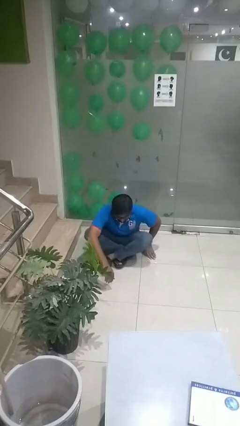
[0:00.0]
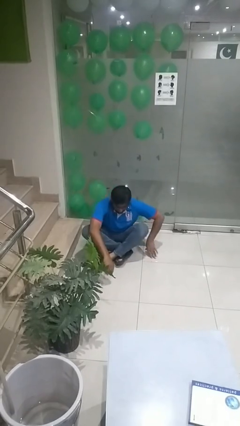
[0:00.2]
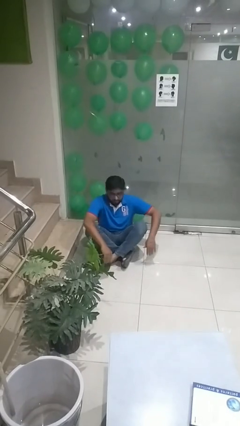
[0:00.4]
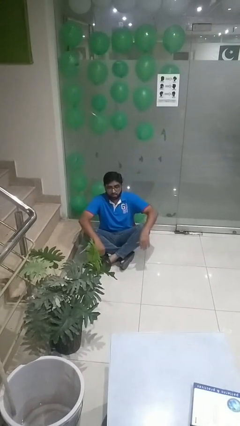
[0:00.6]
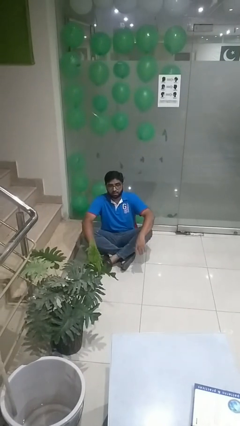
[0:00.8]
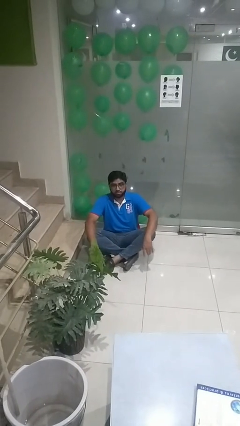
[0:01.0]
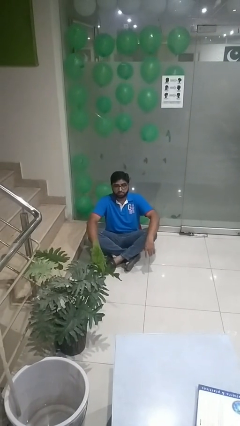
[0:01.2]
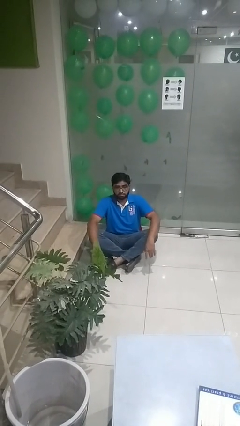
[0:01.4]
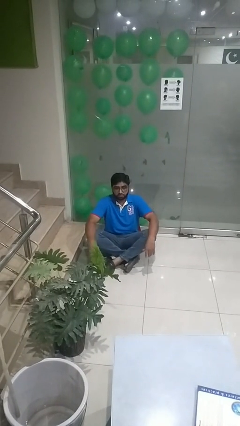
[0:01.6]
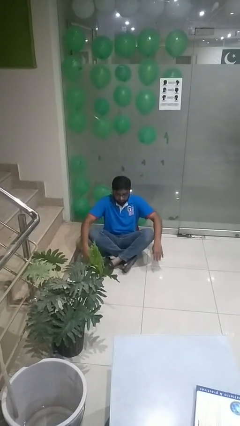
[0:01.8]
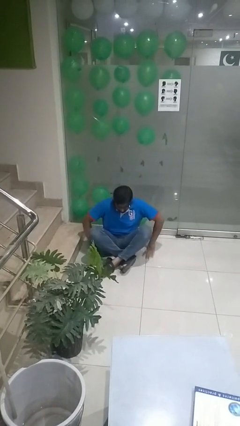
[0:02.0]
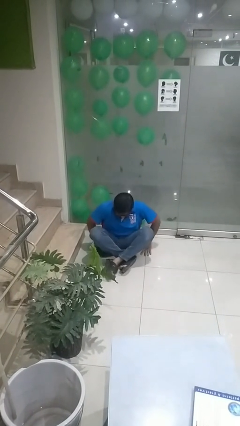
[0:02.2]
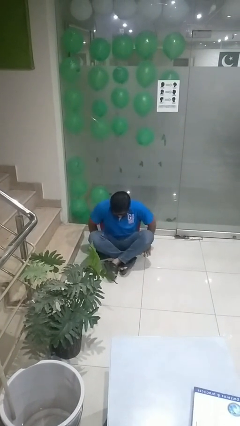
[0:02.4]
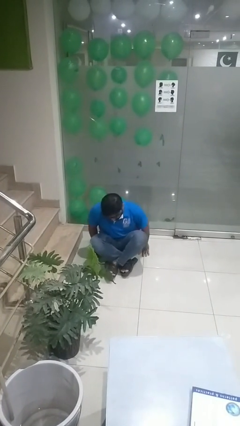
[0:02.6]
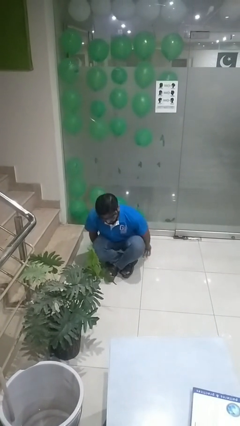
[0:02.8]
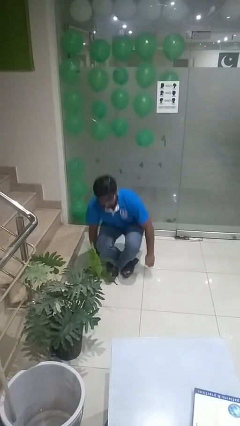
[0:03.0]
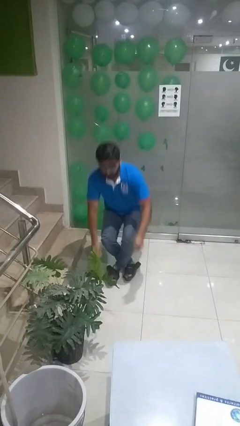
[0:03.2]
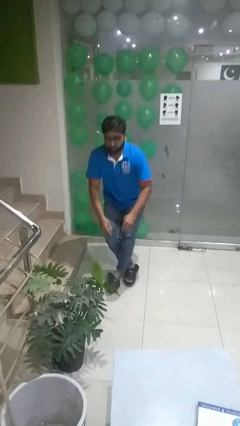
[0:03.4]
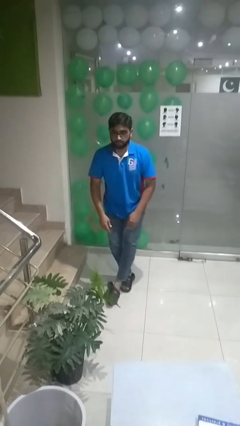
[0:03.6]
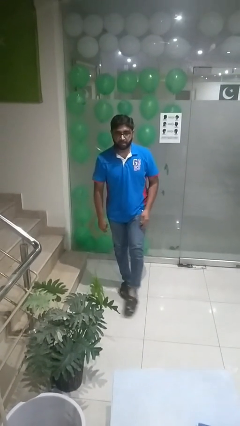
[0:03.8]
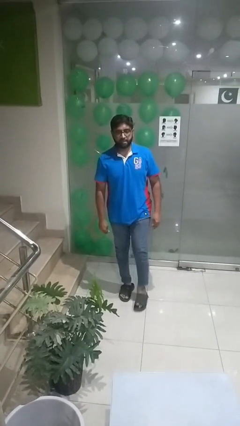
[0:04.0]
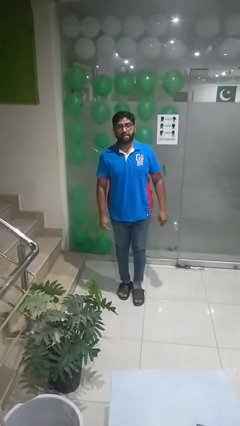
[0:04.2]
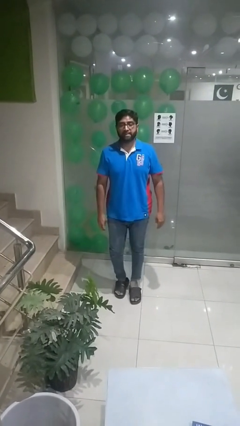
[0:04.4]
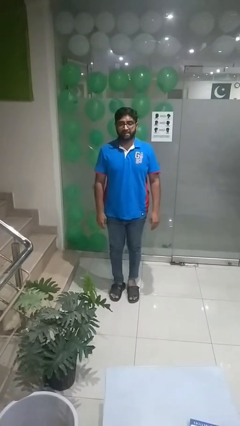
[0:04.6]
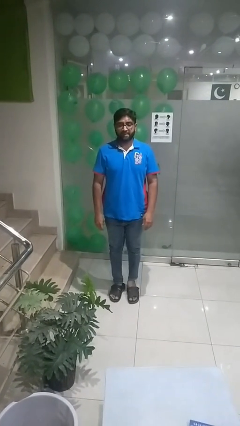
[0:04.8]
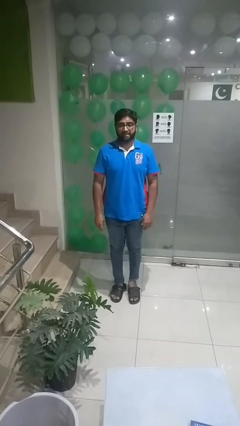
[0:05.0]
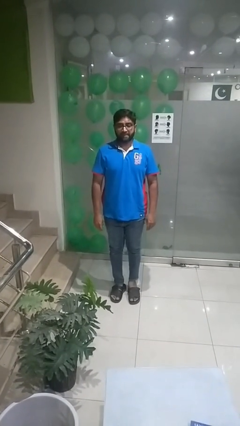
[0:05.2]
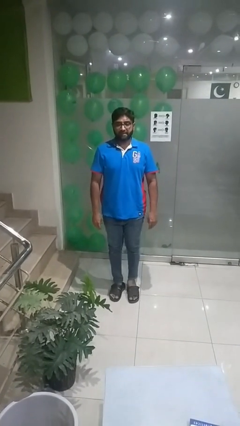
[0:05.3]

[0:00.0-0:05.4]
person stands up from floor

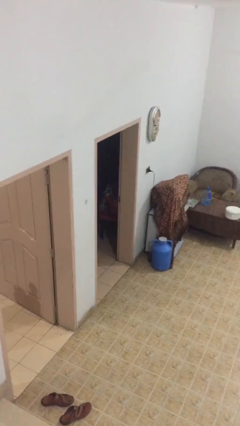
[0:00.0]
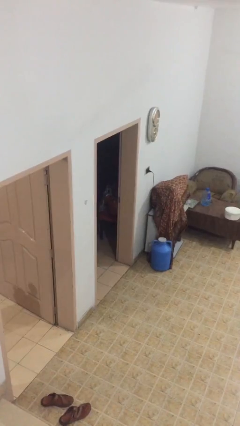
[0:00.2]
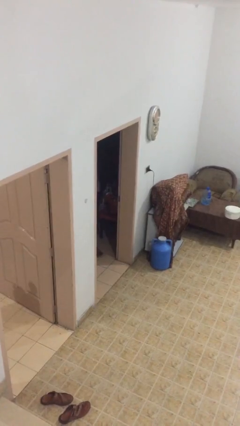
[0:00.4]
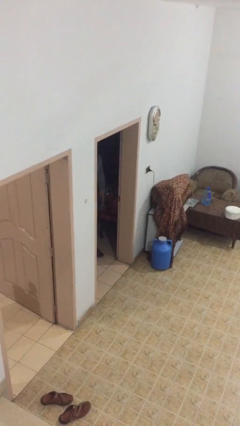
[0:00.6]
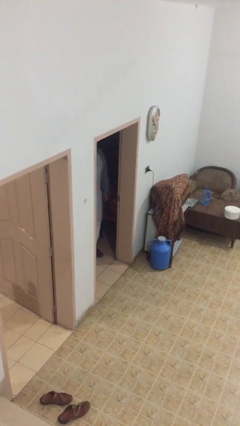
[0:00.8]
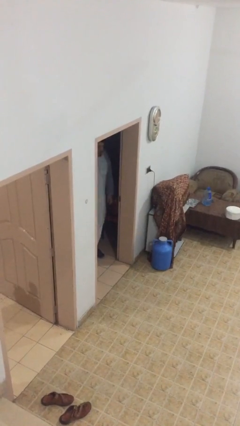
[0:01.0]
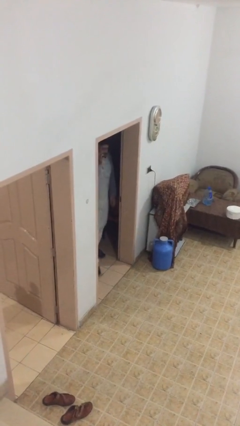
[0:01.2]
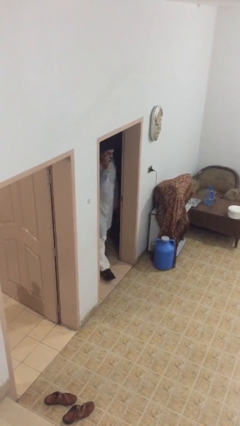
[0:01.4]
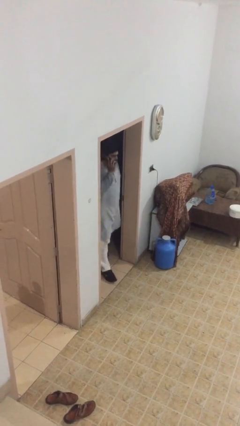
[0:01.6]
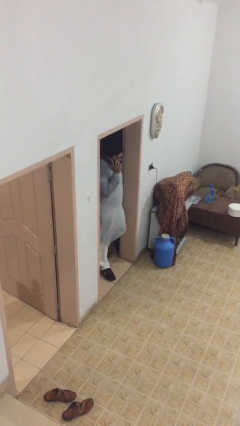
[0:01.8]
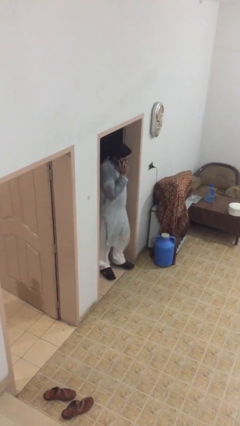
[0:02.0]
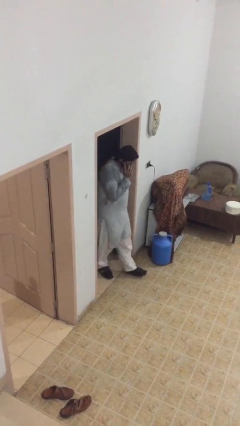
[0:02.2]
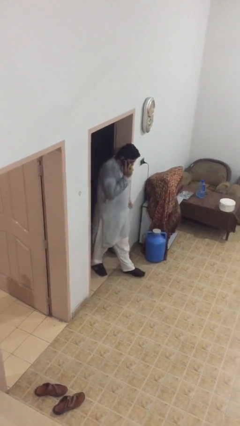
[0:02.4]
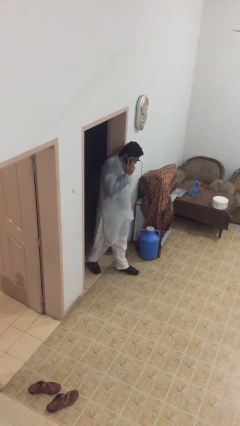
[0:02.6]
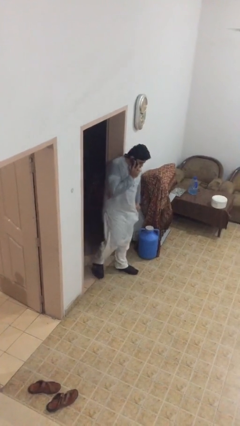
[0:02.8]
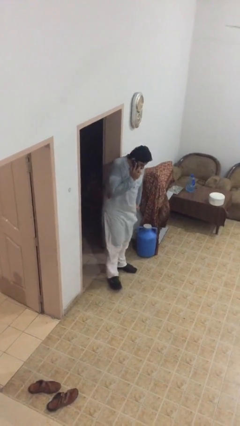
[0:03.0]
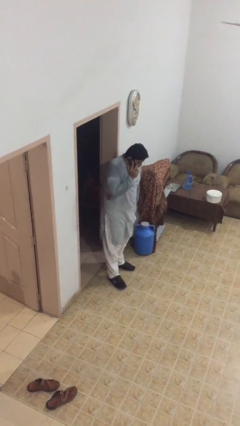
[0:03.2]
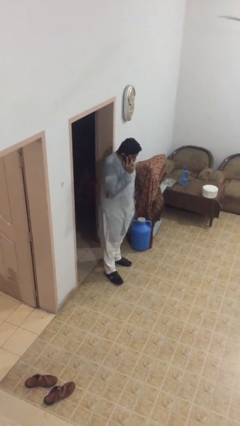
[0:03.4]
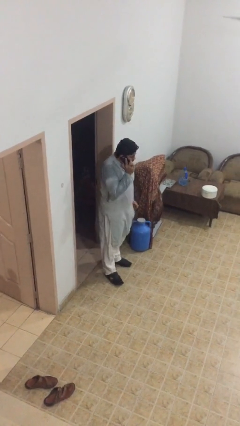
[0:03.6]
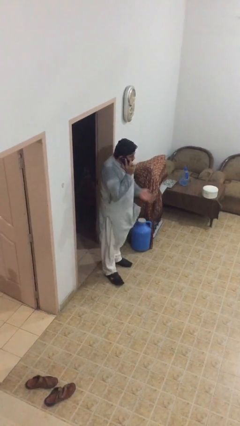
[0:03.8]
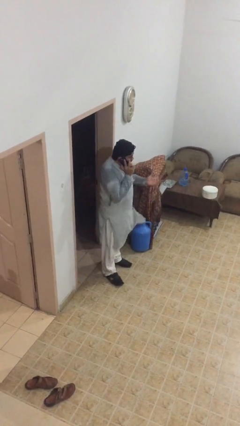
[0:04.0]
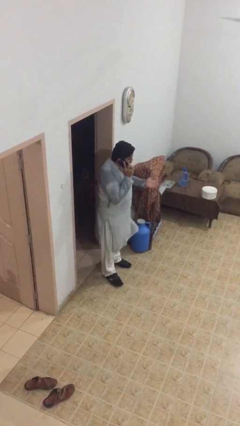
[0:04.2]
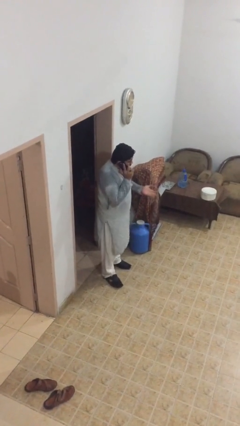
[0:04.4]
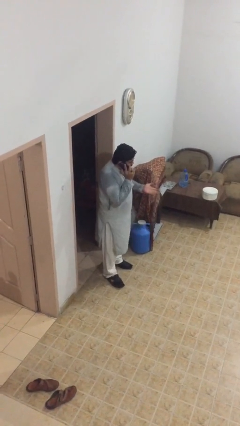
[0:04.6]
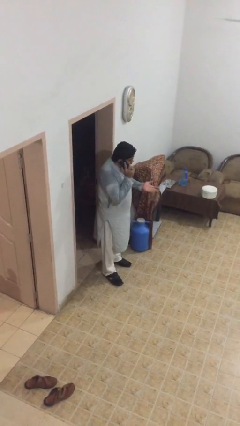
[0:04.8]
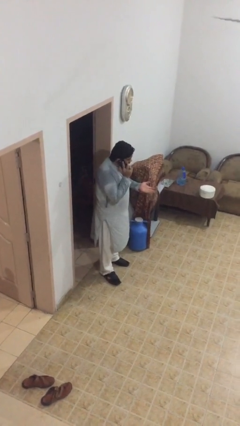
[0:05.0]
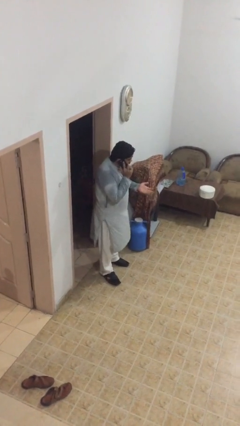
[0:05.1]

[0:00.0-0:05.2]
person enters scene through structure

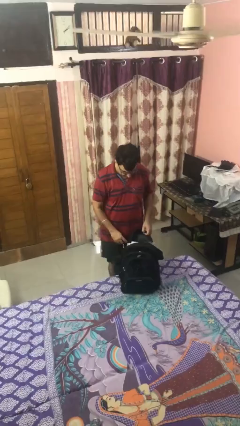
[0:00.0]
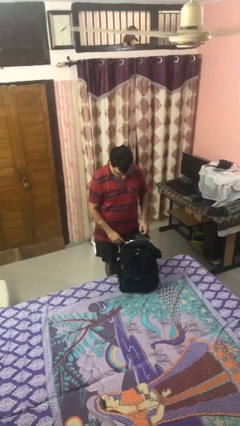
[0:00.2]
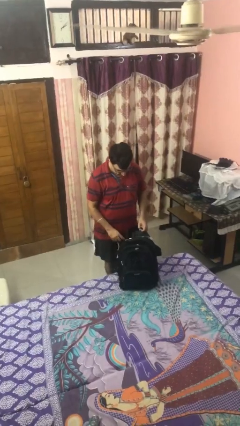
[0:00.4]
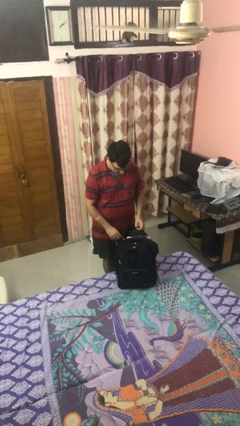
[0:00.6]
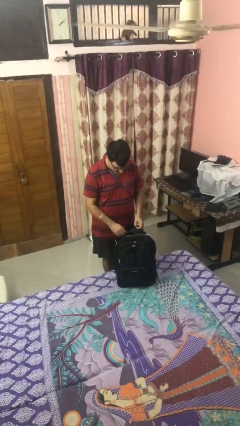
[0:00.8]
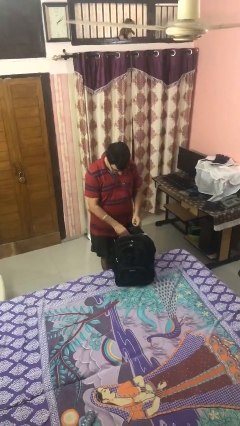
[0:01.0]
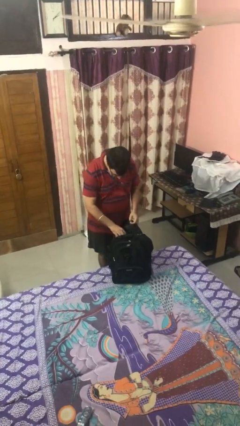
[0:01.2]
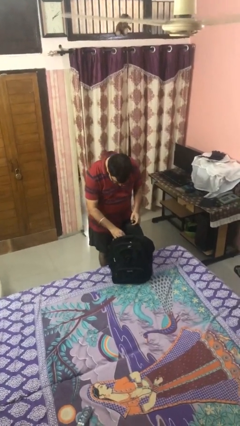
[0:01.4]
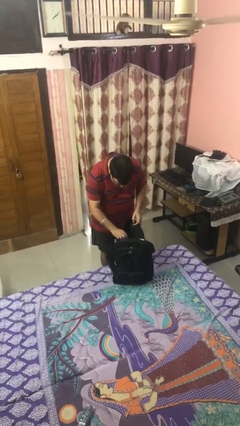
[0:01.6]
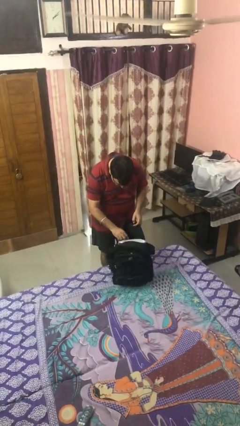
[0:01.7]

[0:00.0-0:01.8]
person searches in backpack

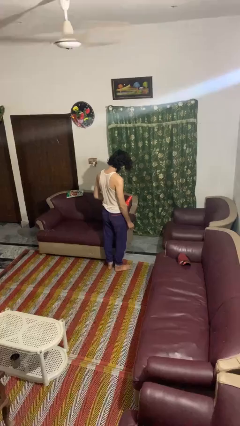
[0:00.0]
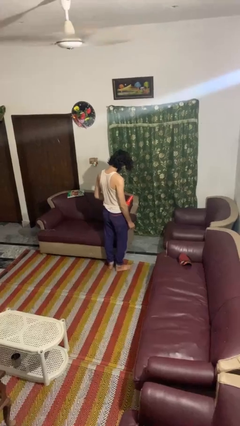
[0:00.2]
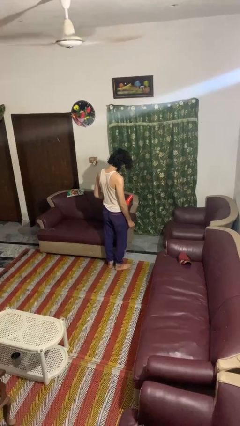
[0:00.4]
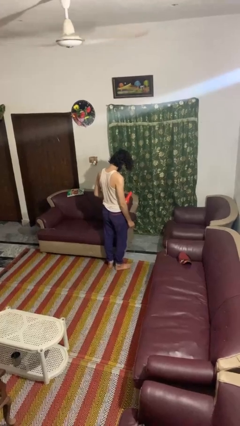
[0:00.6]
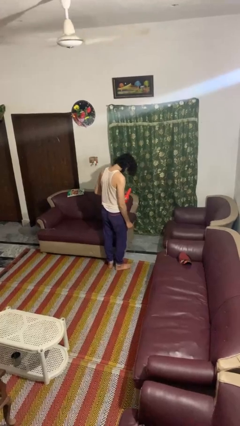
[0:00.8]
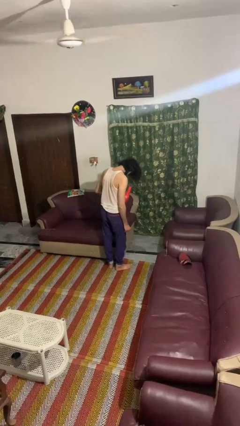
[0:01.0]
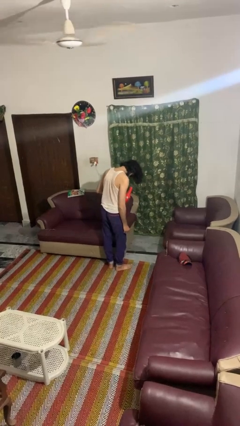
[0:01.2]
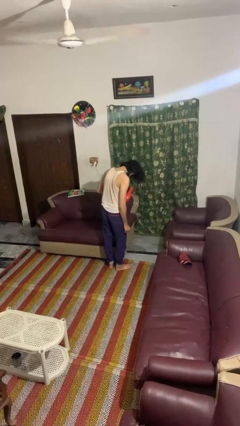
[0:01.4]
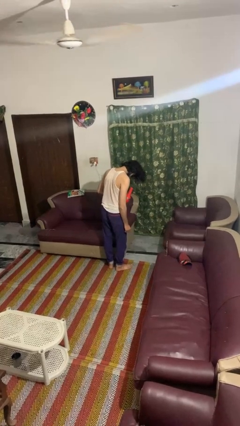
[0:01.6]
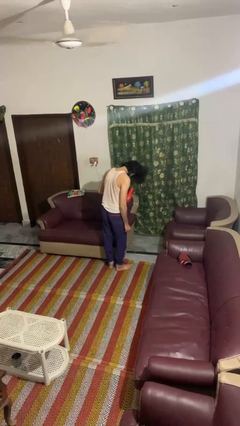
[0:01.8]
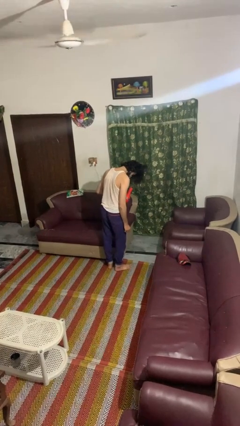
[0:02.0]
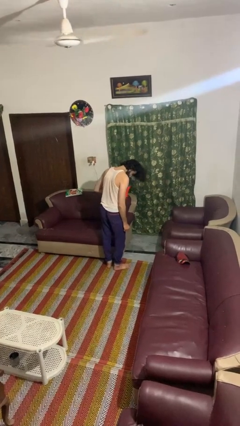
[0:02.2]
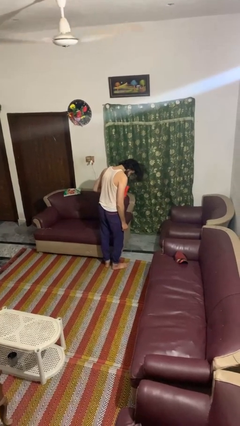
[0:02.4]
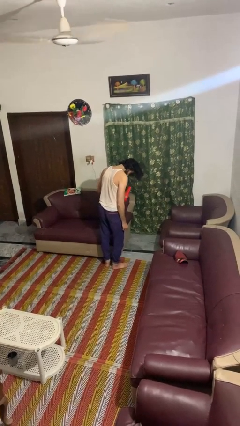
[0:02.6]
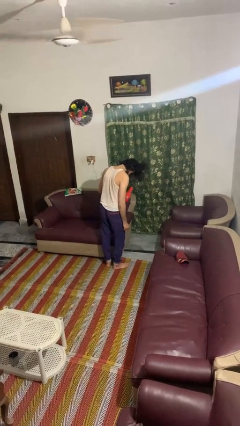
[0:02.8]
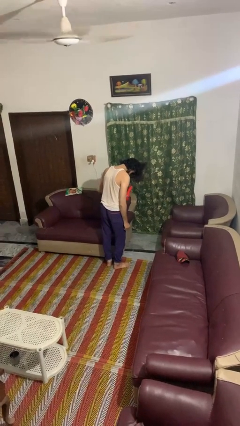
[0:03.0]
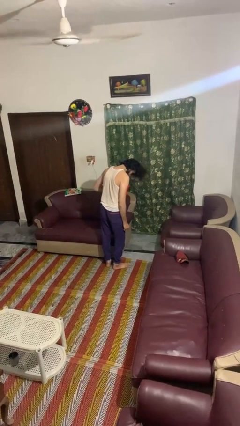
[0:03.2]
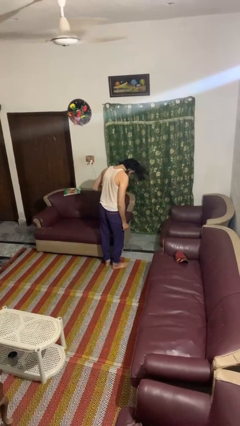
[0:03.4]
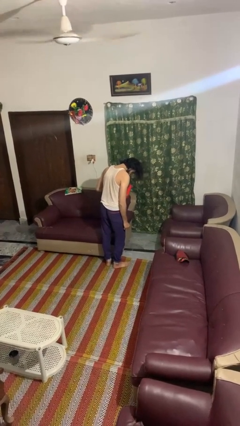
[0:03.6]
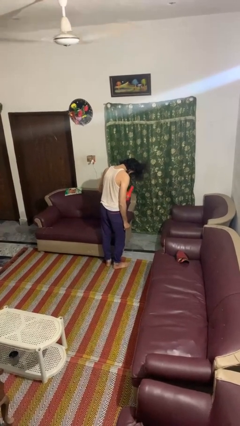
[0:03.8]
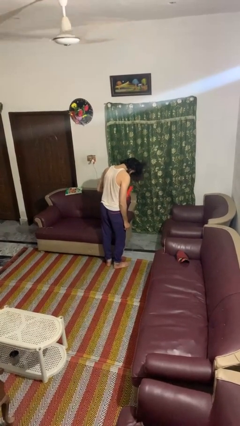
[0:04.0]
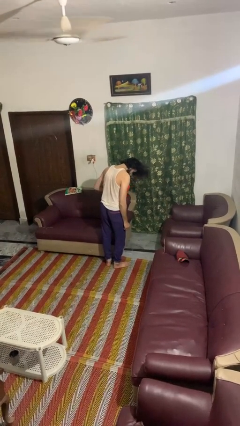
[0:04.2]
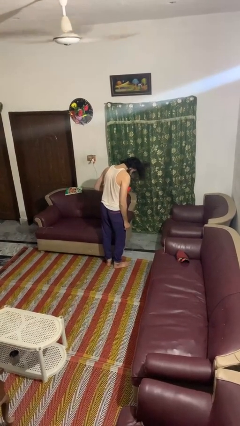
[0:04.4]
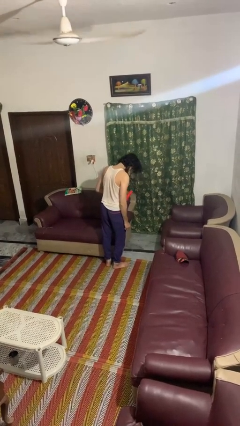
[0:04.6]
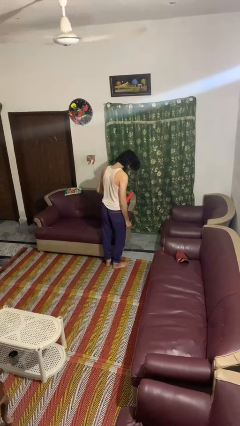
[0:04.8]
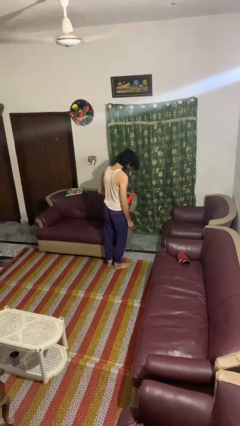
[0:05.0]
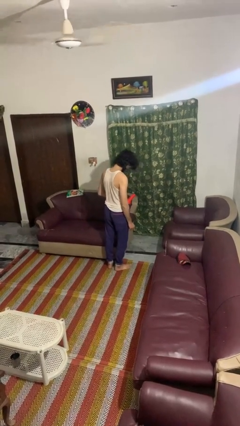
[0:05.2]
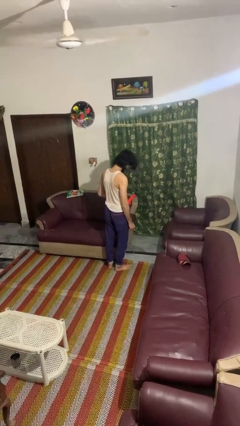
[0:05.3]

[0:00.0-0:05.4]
person dries hair with hairdryer

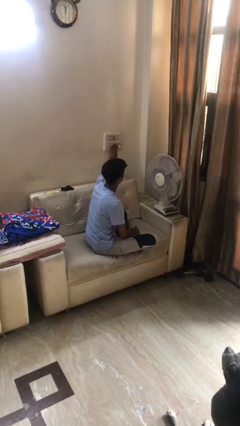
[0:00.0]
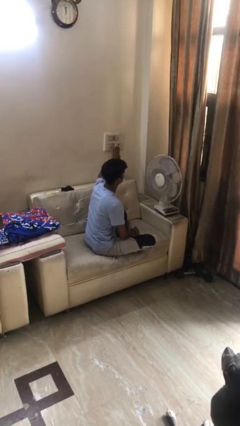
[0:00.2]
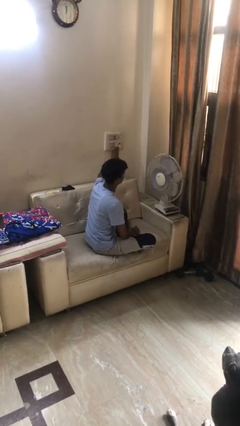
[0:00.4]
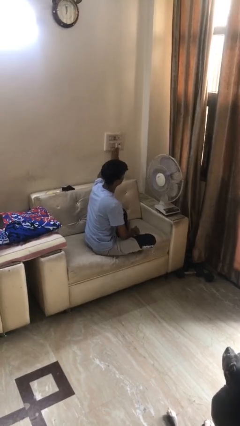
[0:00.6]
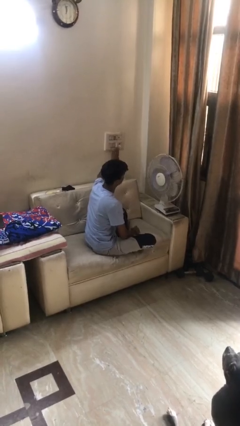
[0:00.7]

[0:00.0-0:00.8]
person turns off fan
